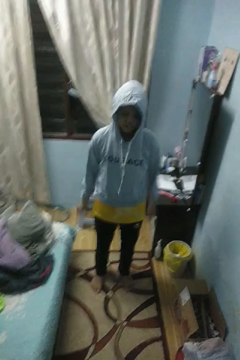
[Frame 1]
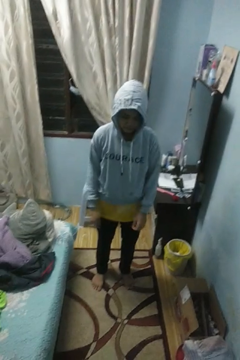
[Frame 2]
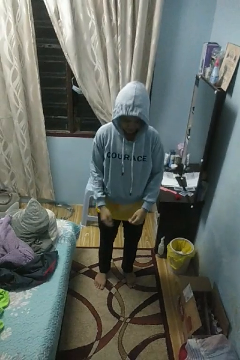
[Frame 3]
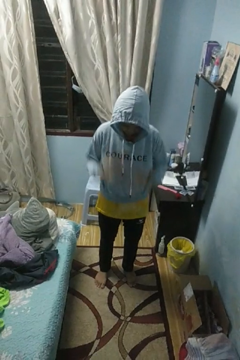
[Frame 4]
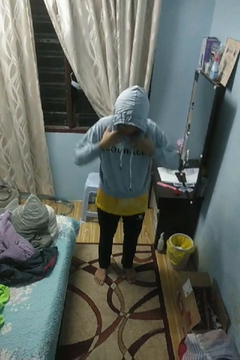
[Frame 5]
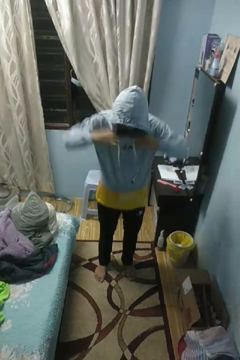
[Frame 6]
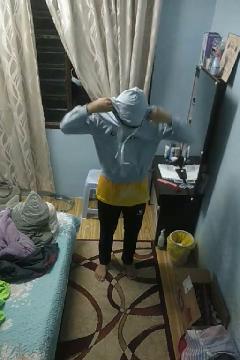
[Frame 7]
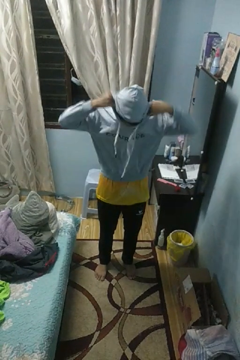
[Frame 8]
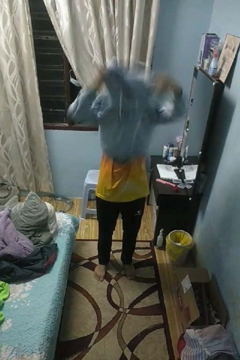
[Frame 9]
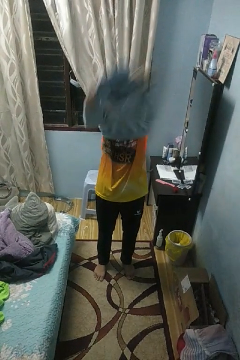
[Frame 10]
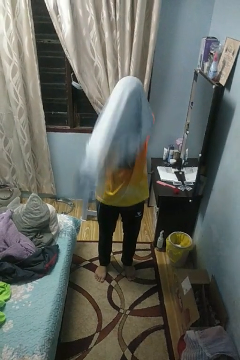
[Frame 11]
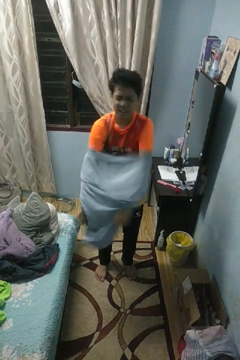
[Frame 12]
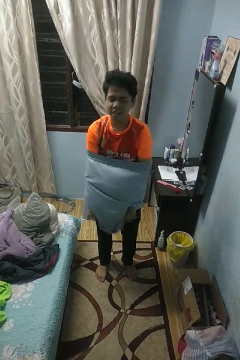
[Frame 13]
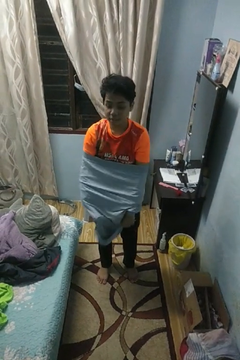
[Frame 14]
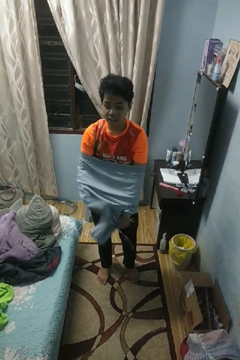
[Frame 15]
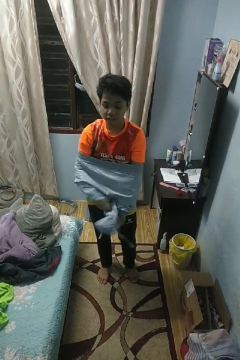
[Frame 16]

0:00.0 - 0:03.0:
person takes off hoodie

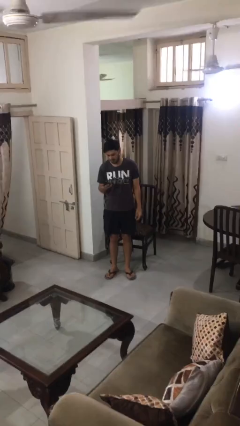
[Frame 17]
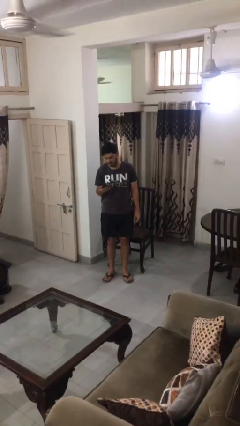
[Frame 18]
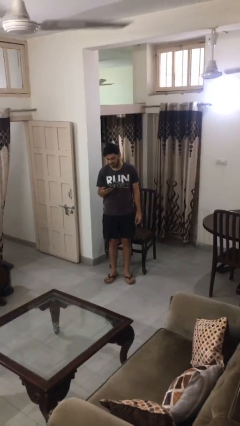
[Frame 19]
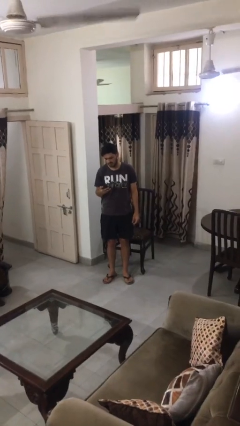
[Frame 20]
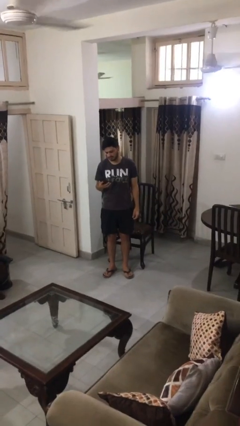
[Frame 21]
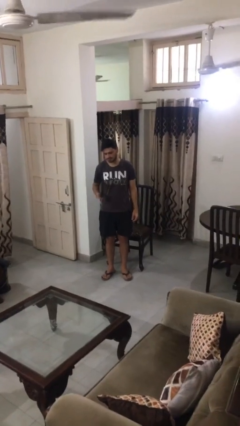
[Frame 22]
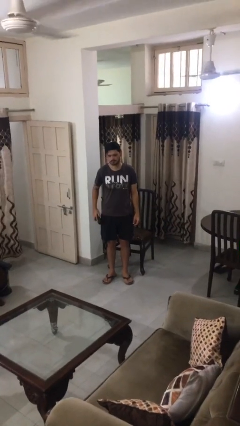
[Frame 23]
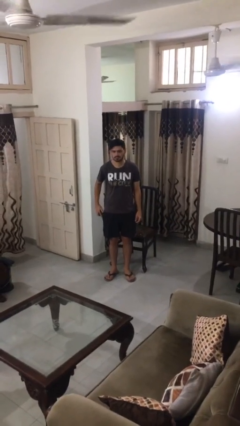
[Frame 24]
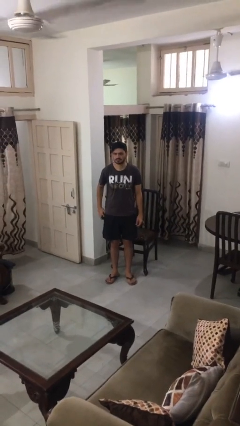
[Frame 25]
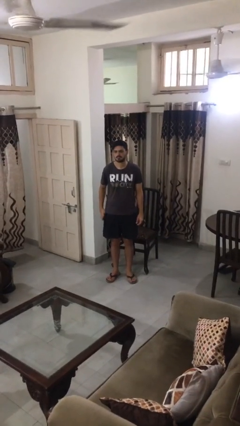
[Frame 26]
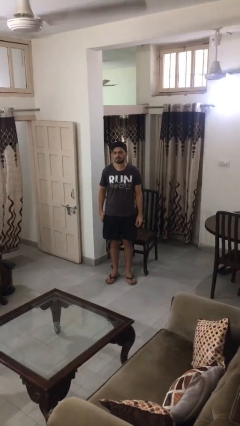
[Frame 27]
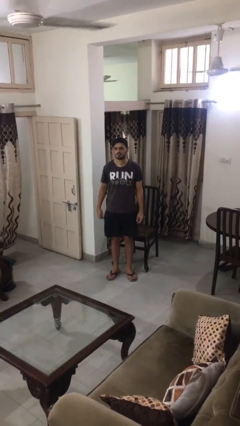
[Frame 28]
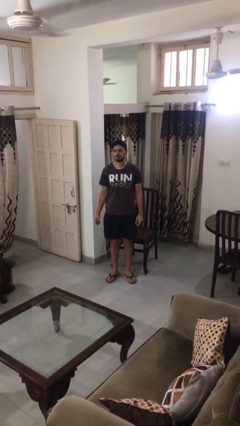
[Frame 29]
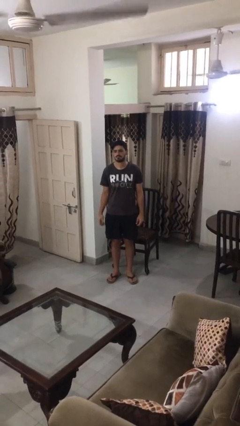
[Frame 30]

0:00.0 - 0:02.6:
person puts phone into pocket

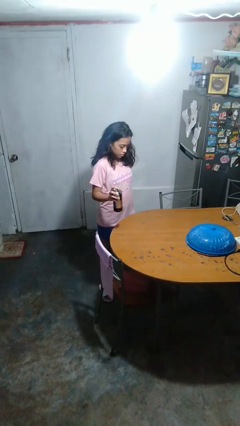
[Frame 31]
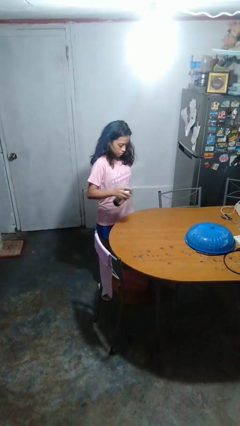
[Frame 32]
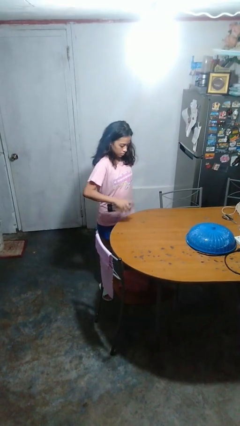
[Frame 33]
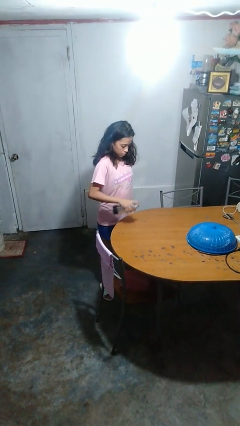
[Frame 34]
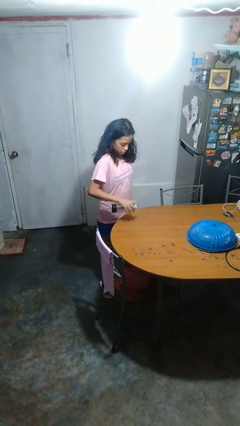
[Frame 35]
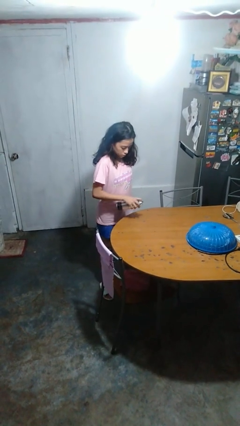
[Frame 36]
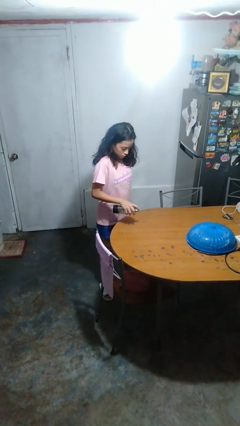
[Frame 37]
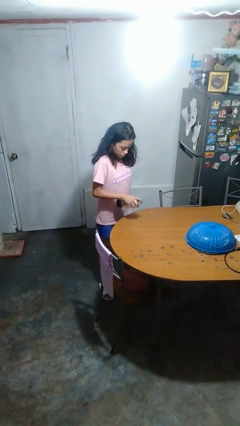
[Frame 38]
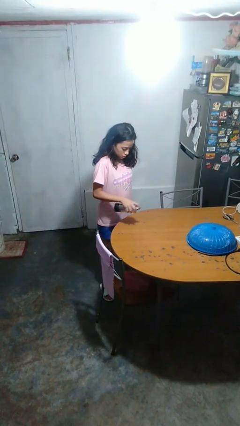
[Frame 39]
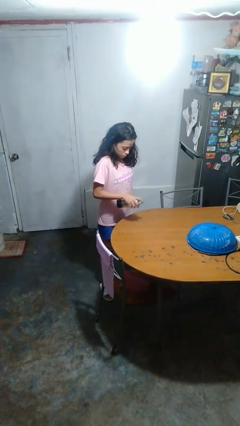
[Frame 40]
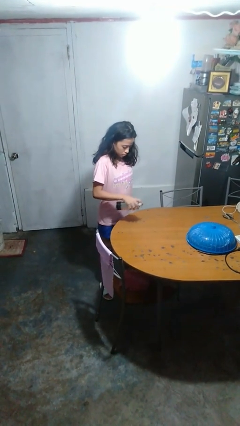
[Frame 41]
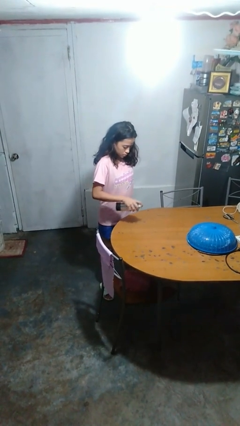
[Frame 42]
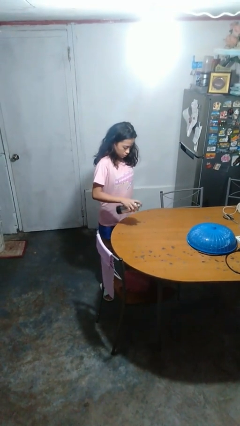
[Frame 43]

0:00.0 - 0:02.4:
person sprays from bottle

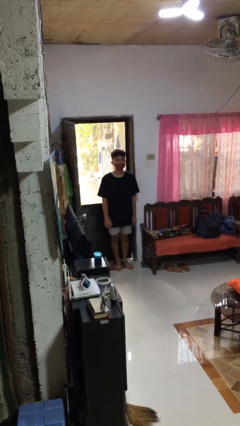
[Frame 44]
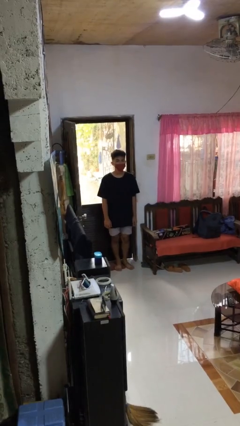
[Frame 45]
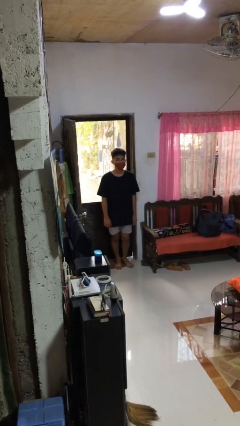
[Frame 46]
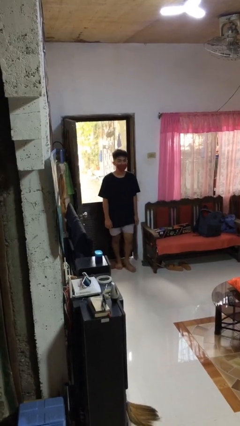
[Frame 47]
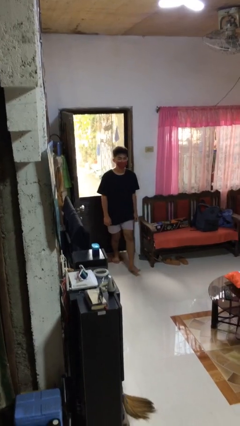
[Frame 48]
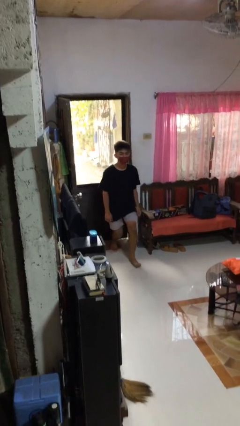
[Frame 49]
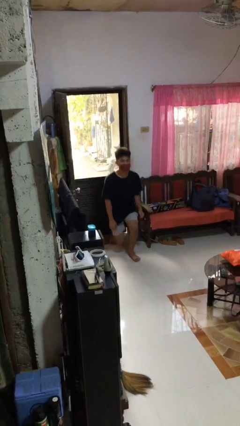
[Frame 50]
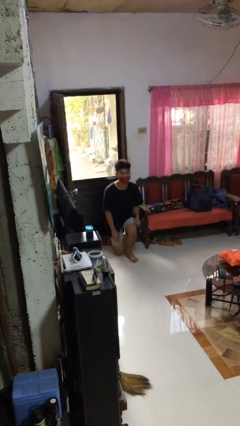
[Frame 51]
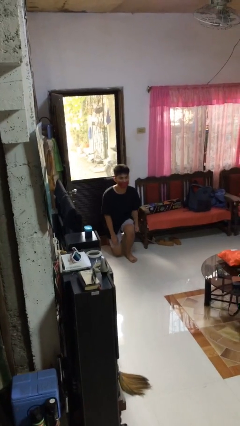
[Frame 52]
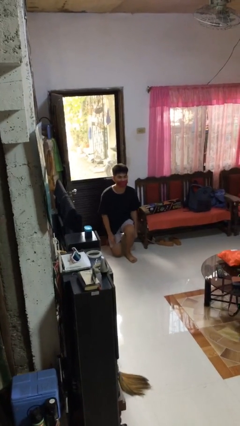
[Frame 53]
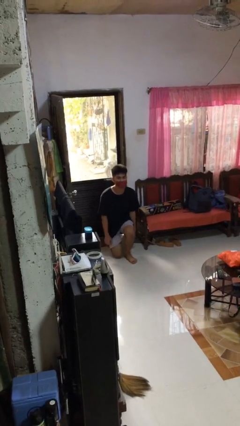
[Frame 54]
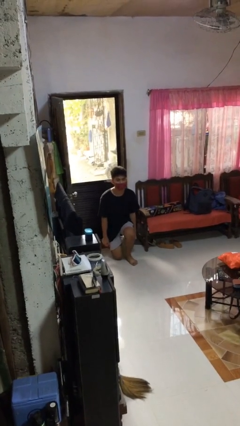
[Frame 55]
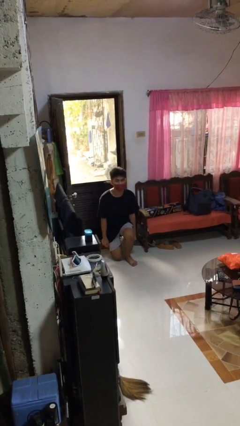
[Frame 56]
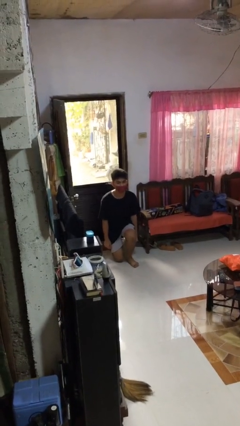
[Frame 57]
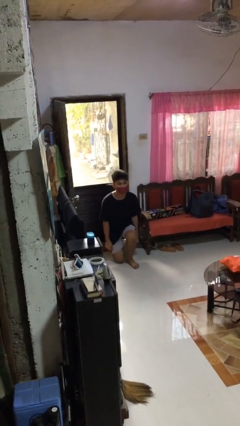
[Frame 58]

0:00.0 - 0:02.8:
person kneels

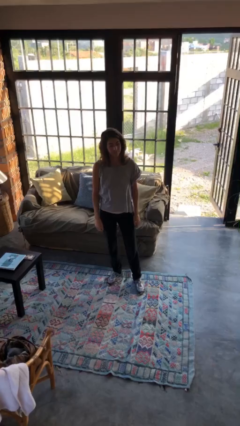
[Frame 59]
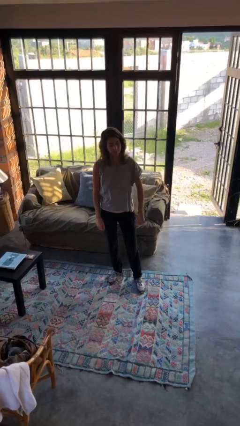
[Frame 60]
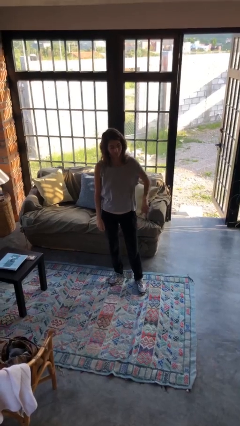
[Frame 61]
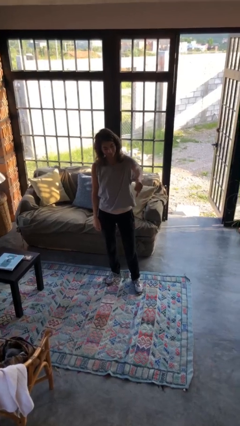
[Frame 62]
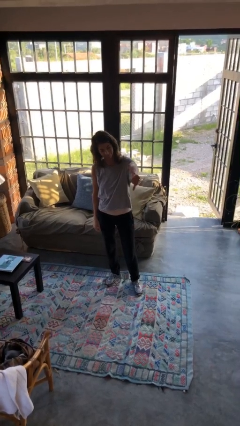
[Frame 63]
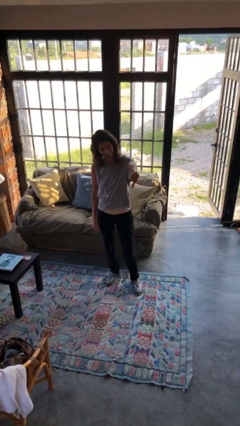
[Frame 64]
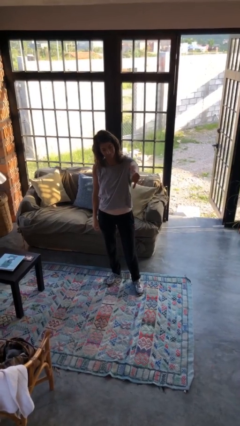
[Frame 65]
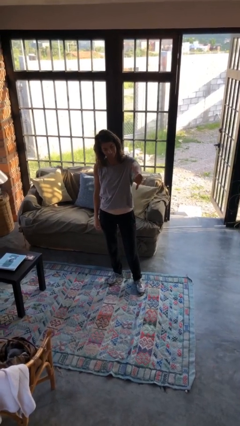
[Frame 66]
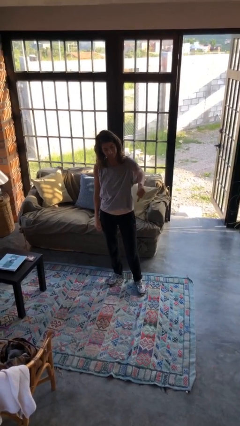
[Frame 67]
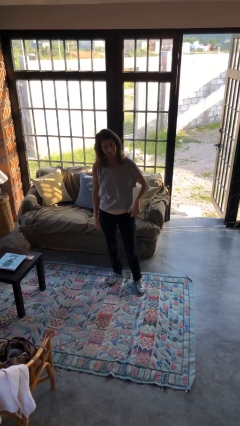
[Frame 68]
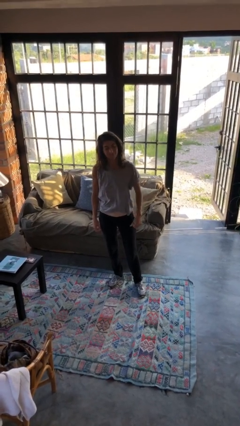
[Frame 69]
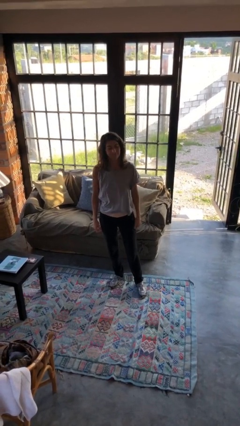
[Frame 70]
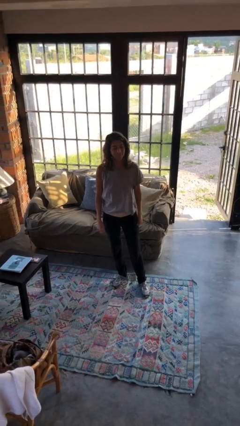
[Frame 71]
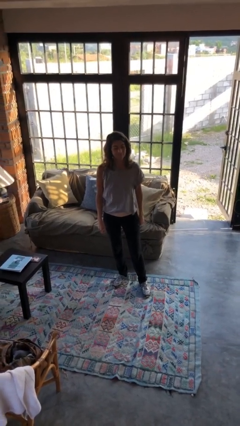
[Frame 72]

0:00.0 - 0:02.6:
person gestures thumbs down

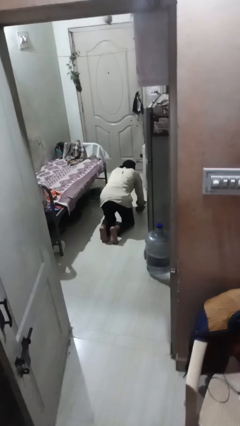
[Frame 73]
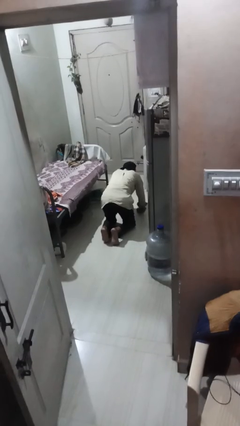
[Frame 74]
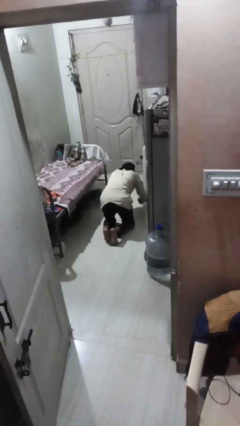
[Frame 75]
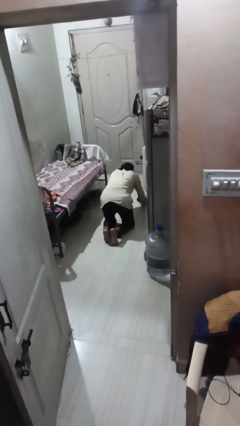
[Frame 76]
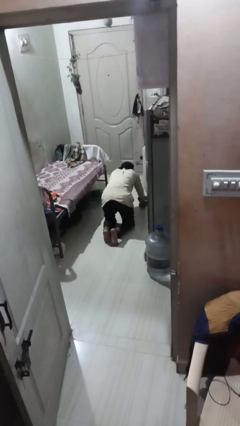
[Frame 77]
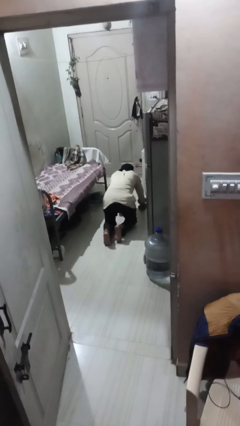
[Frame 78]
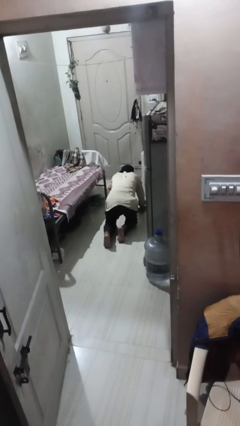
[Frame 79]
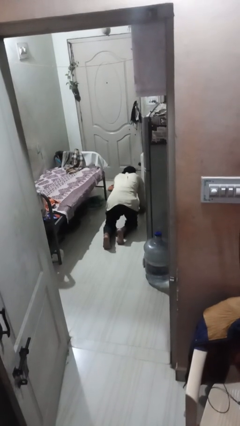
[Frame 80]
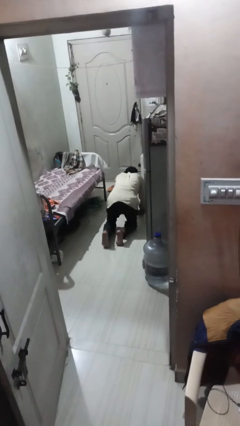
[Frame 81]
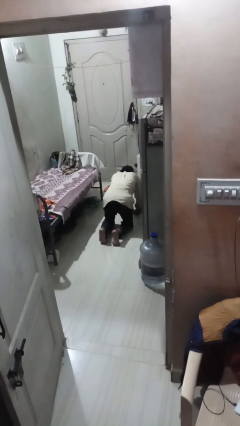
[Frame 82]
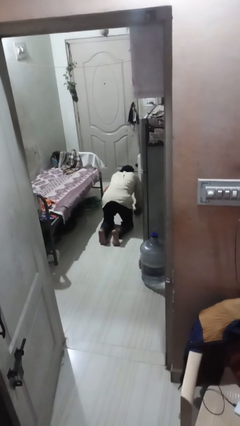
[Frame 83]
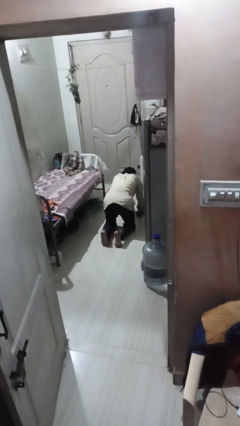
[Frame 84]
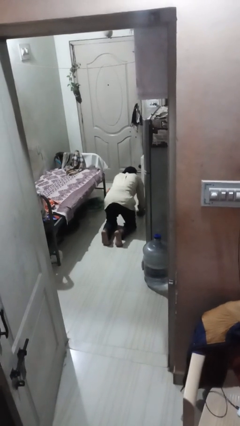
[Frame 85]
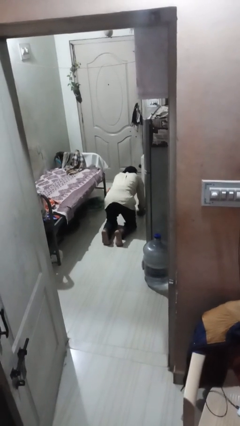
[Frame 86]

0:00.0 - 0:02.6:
person crawls

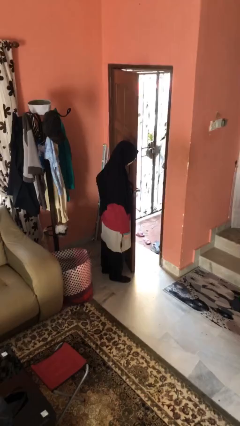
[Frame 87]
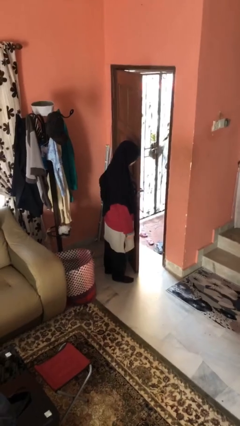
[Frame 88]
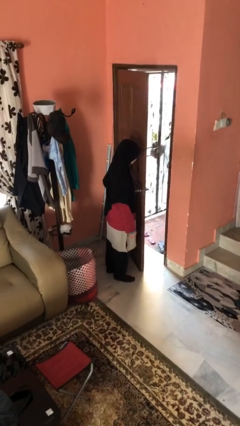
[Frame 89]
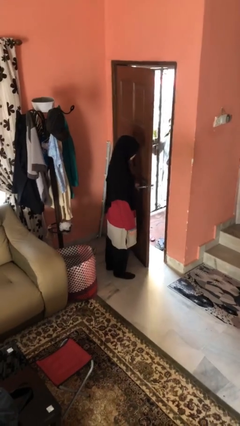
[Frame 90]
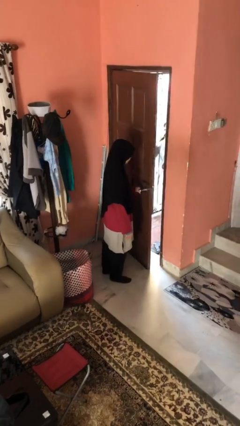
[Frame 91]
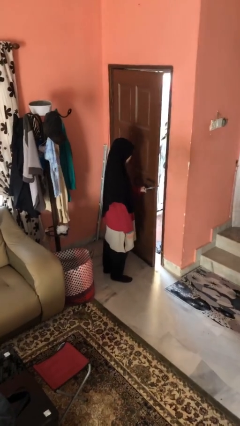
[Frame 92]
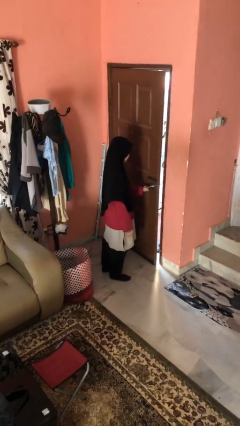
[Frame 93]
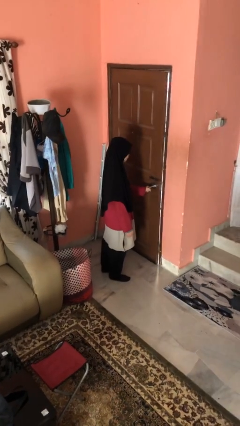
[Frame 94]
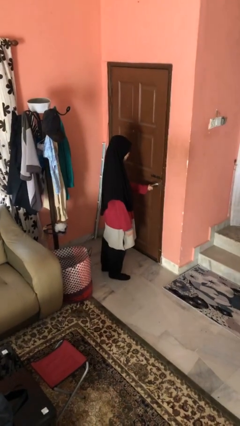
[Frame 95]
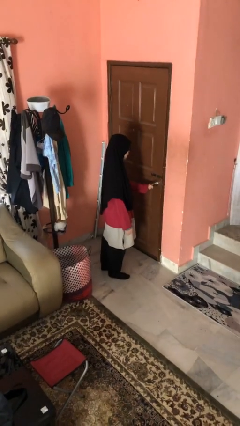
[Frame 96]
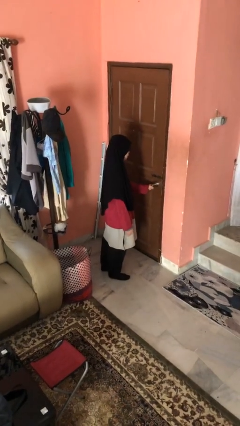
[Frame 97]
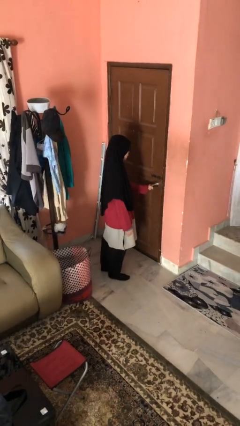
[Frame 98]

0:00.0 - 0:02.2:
person closes facility door
